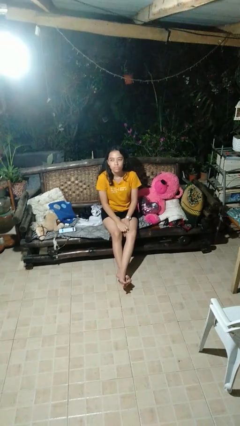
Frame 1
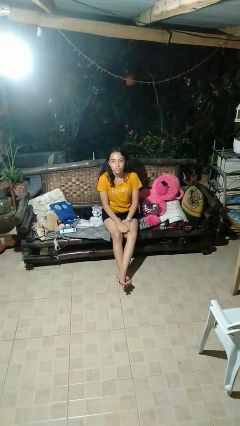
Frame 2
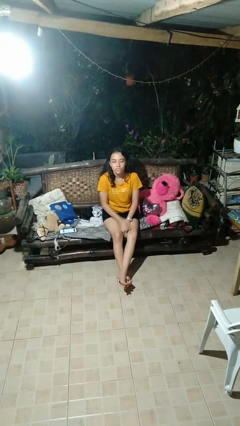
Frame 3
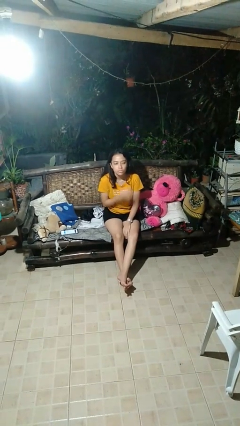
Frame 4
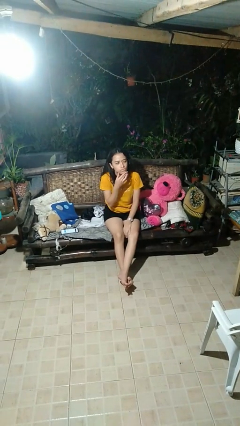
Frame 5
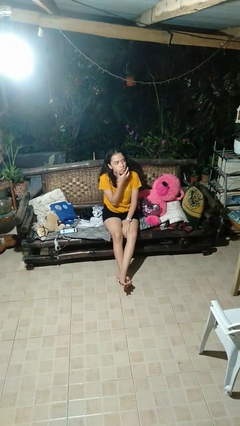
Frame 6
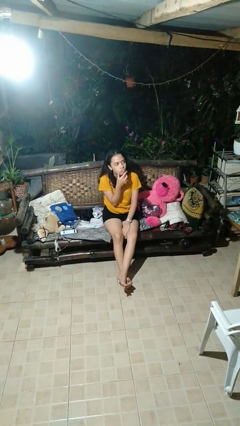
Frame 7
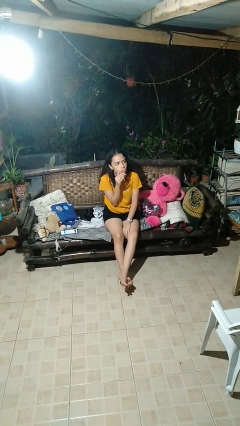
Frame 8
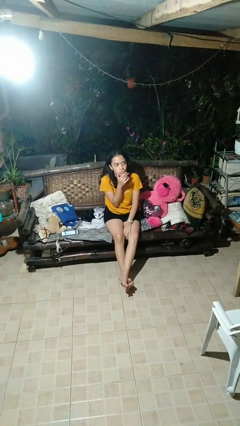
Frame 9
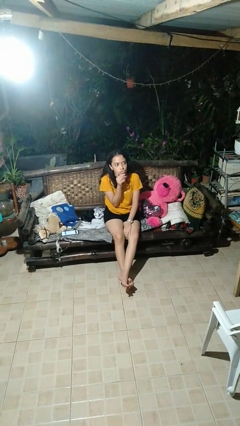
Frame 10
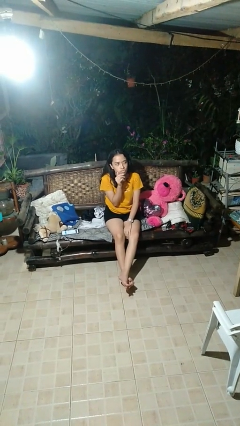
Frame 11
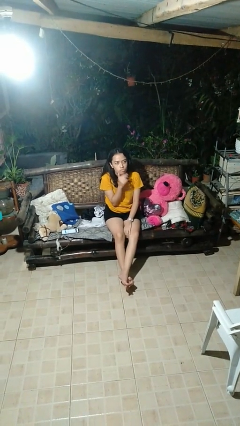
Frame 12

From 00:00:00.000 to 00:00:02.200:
person strokes chin

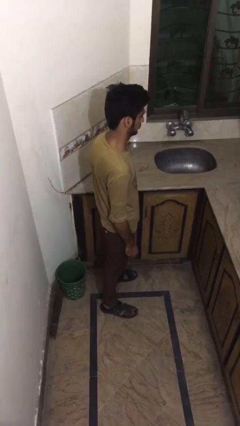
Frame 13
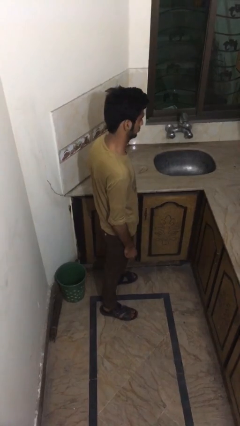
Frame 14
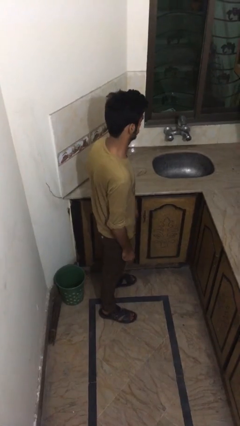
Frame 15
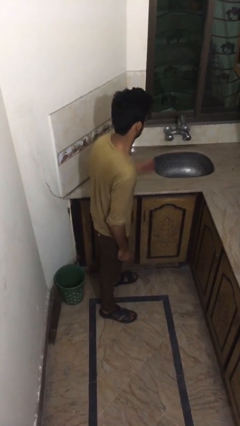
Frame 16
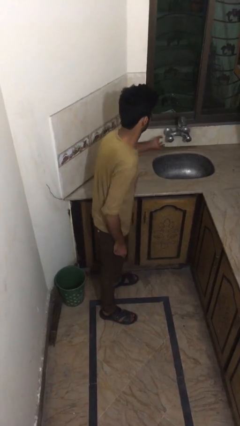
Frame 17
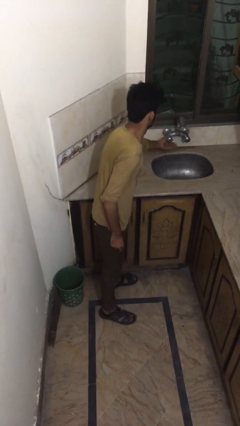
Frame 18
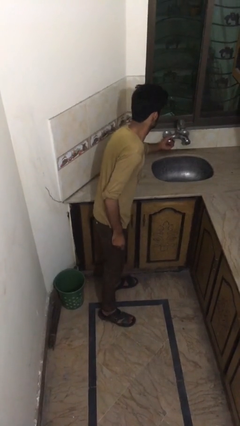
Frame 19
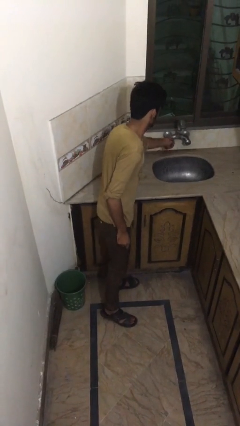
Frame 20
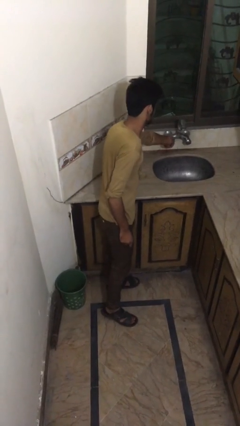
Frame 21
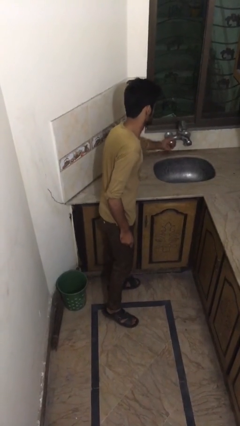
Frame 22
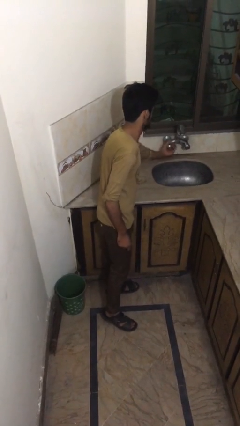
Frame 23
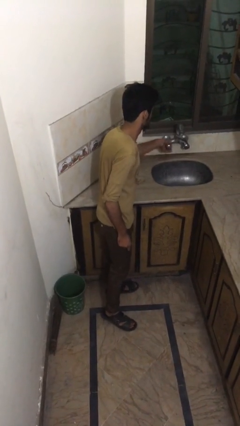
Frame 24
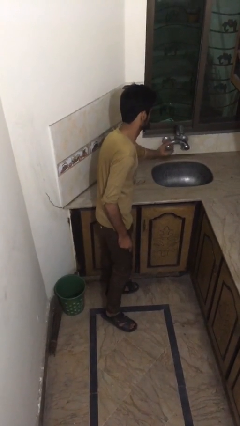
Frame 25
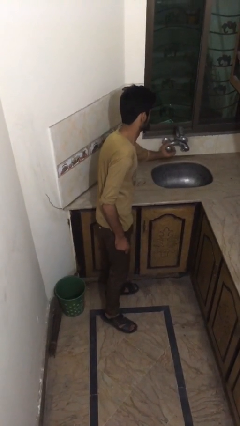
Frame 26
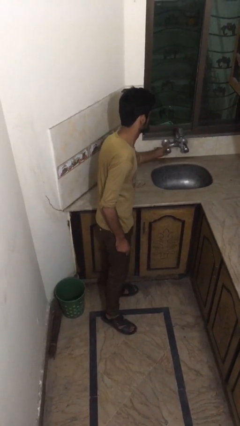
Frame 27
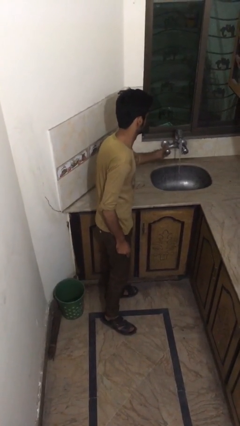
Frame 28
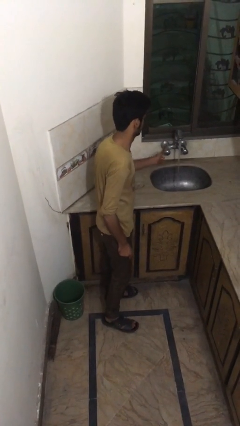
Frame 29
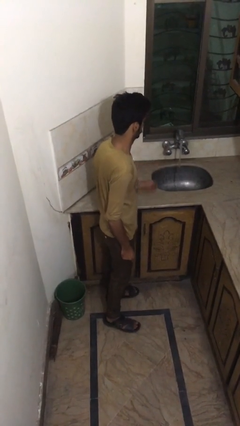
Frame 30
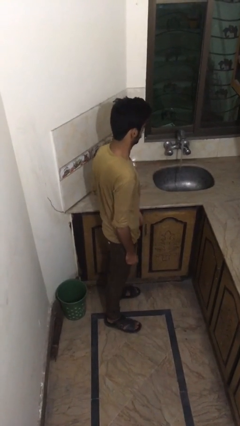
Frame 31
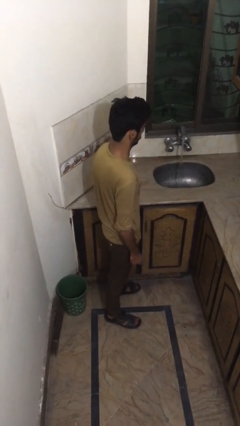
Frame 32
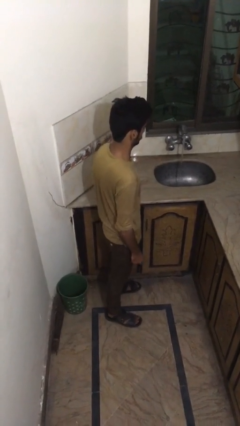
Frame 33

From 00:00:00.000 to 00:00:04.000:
person turns on faucet

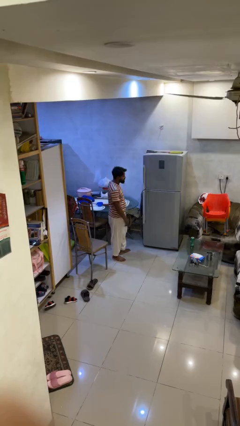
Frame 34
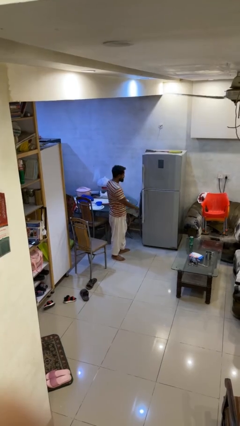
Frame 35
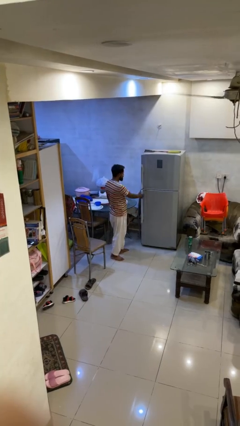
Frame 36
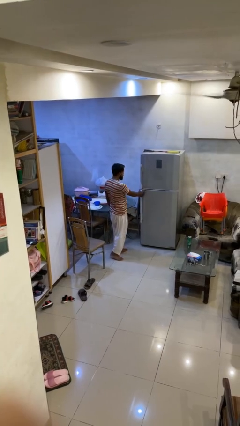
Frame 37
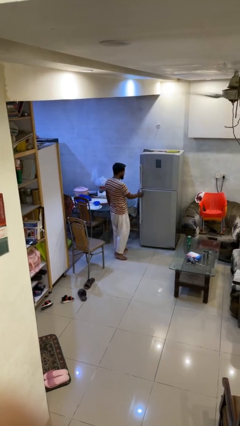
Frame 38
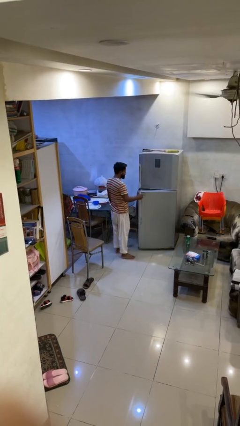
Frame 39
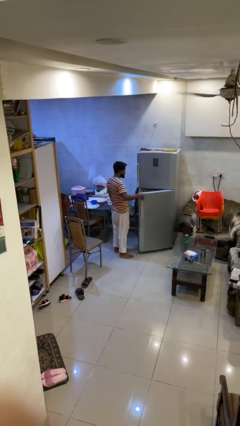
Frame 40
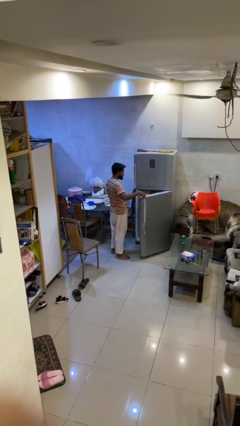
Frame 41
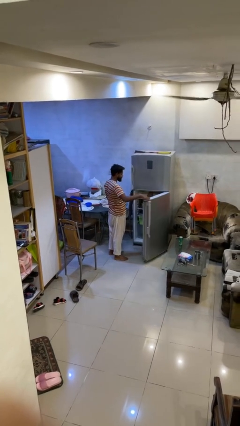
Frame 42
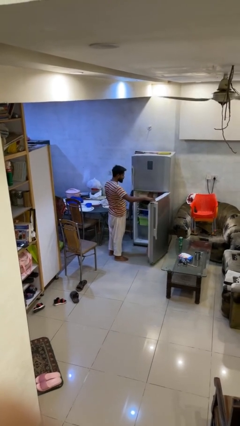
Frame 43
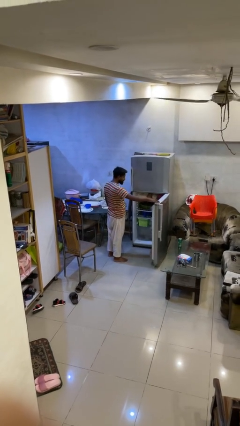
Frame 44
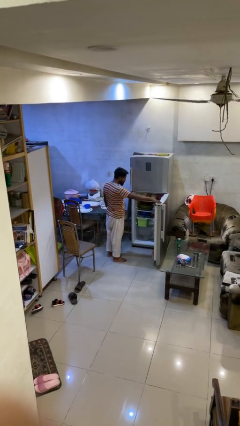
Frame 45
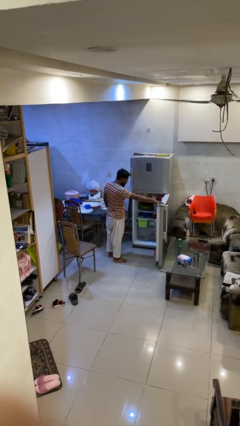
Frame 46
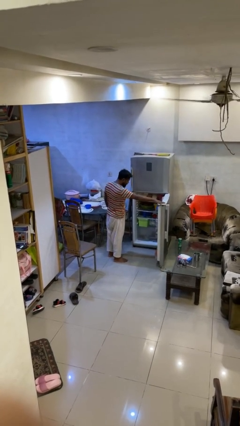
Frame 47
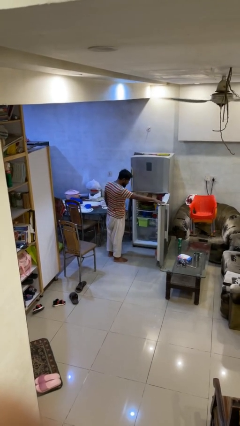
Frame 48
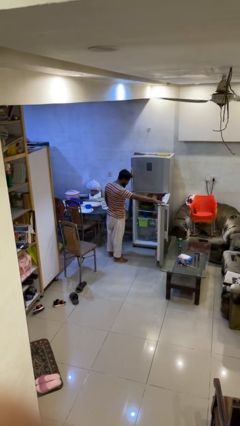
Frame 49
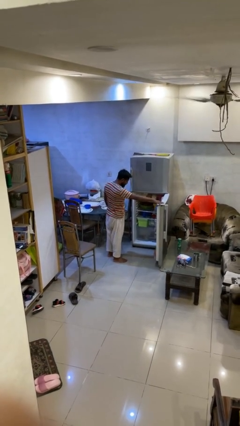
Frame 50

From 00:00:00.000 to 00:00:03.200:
person opens refrigerator

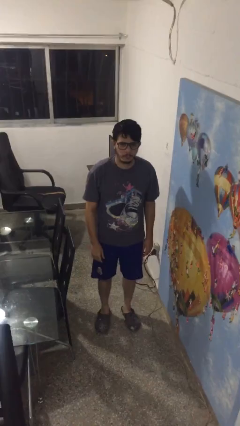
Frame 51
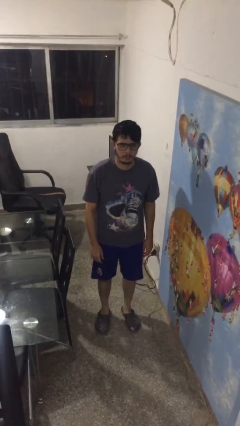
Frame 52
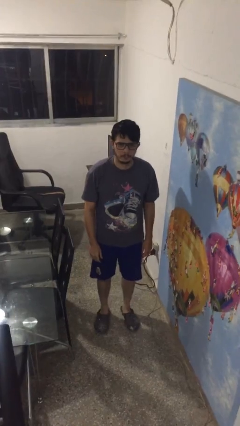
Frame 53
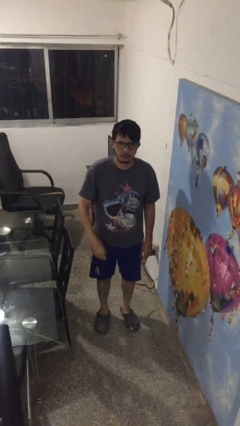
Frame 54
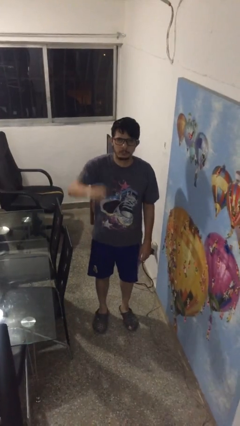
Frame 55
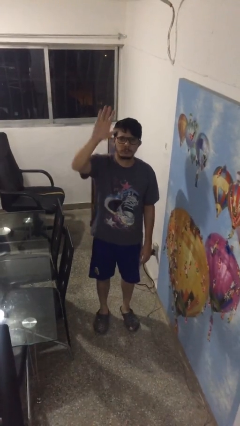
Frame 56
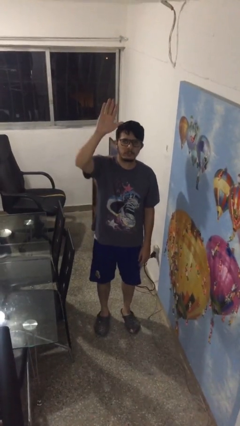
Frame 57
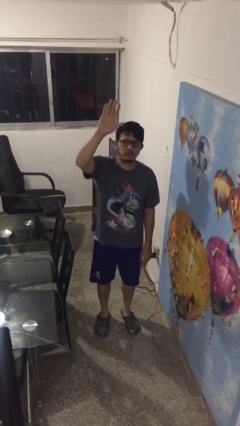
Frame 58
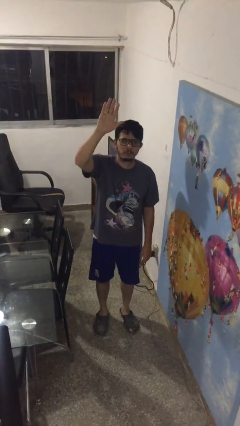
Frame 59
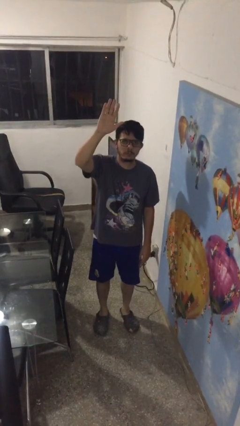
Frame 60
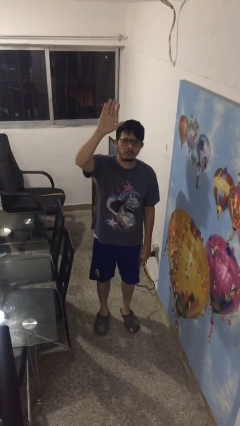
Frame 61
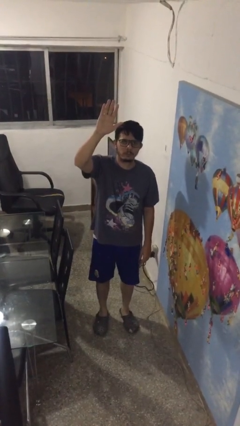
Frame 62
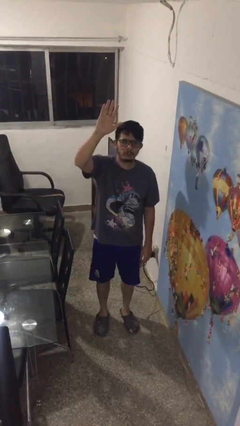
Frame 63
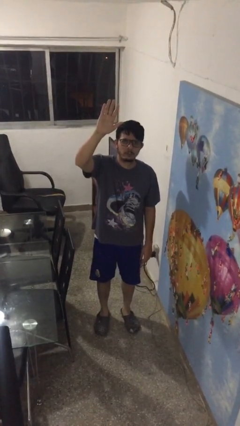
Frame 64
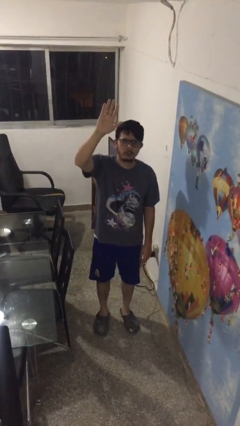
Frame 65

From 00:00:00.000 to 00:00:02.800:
person gestures raise hand

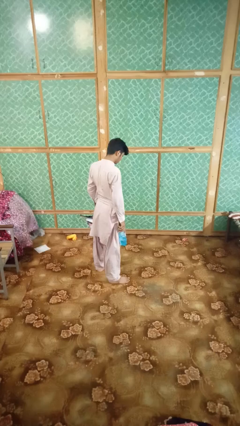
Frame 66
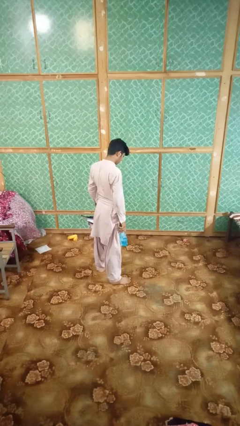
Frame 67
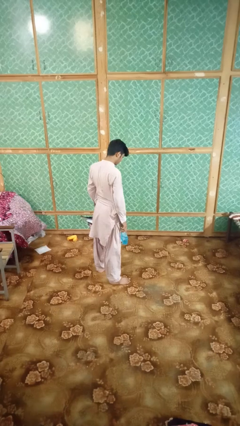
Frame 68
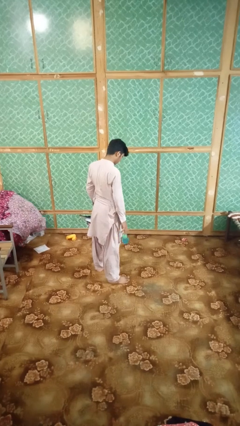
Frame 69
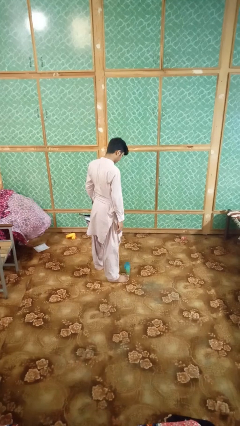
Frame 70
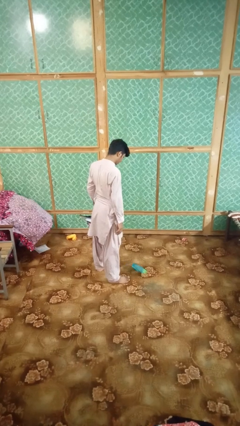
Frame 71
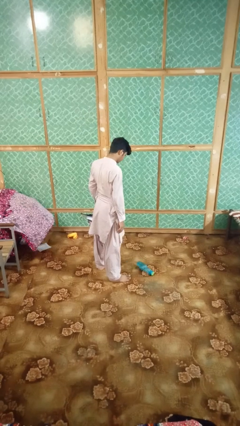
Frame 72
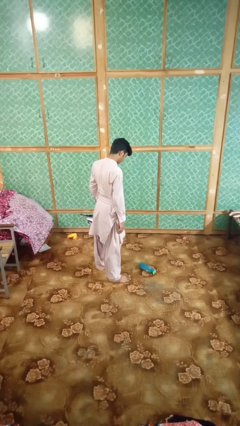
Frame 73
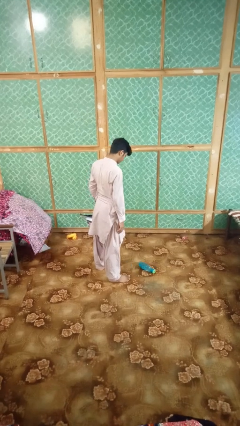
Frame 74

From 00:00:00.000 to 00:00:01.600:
person drops object

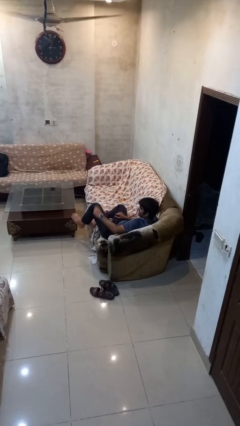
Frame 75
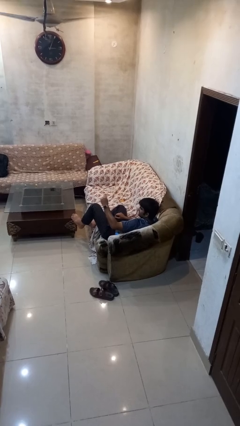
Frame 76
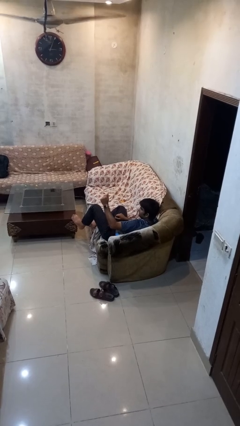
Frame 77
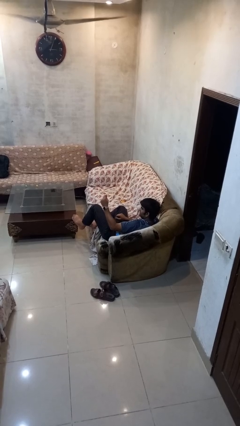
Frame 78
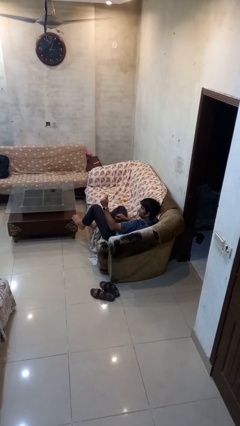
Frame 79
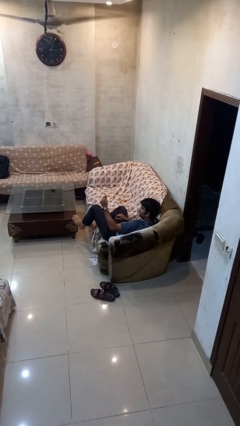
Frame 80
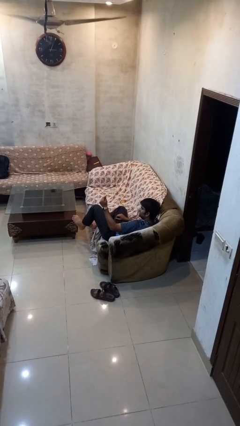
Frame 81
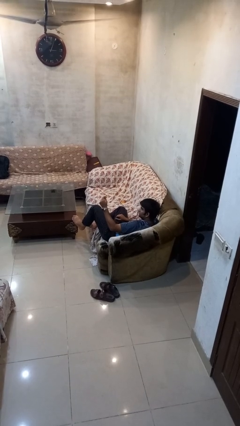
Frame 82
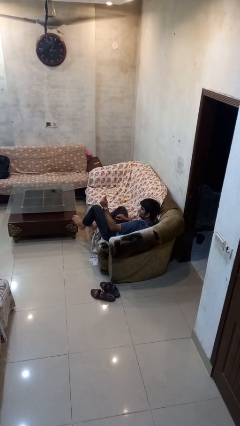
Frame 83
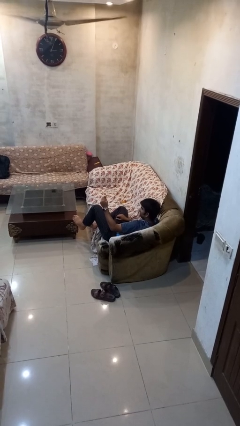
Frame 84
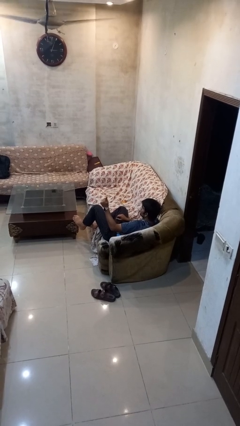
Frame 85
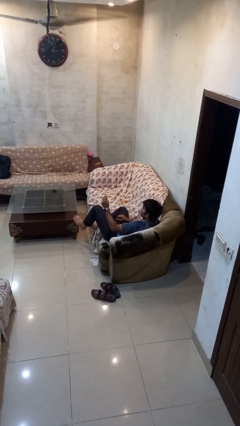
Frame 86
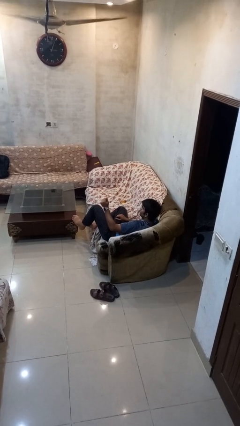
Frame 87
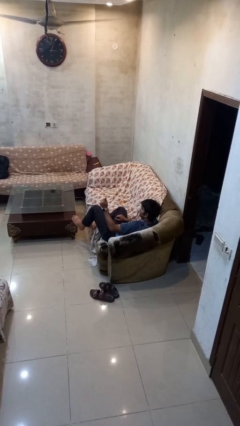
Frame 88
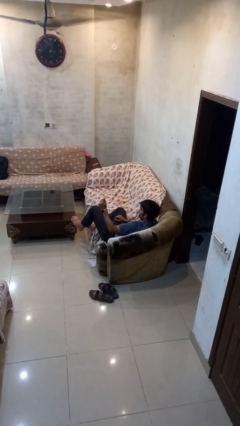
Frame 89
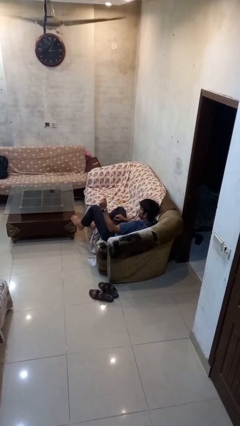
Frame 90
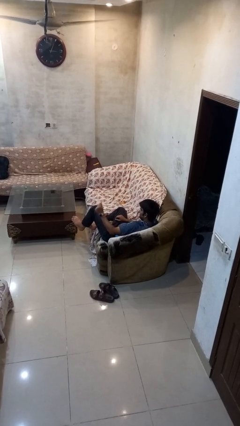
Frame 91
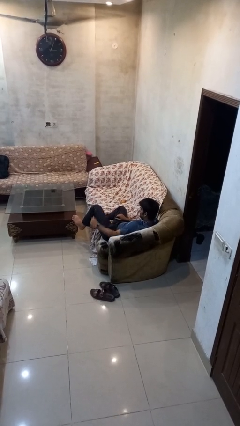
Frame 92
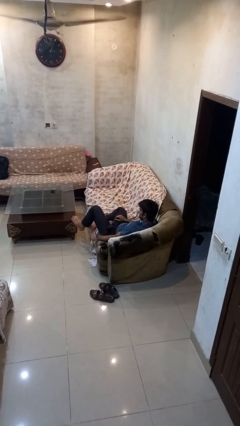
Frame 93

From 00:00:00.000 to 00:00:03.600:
person snaps fingers
